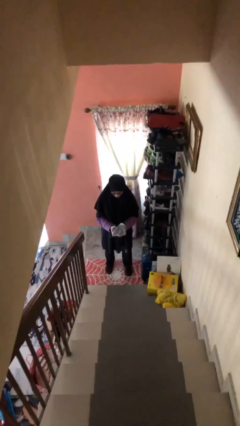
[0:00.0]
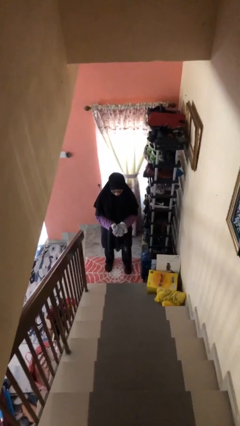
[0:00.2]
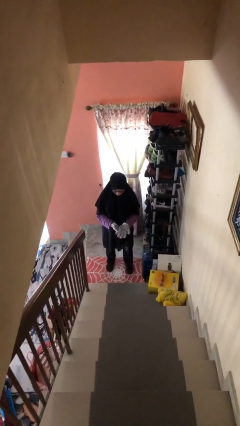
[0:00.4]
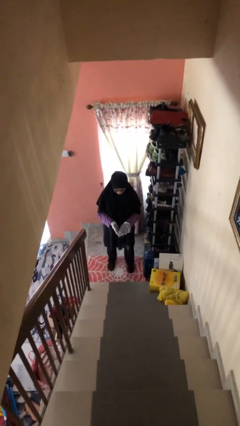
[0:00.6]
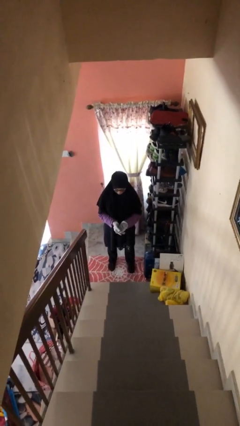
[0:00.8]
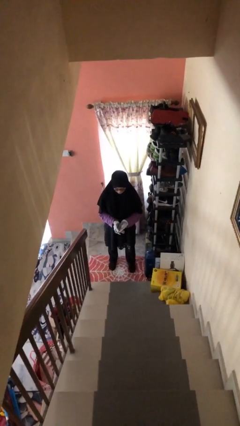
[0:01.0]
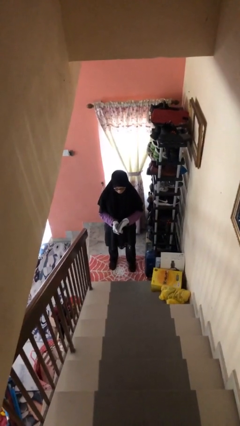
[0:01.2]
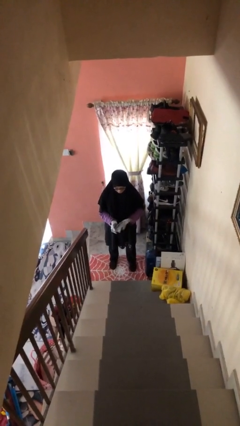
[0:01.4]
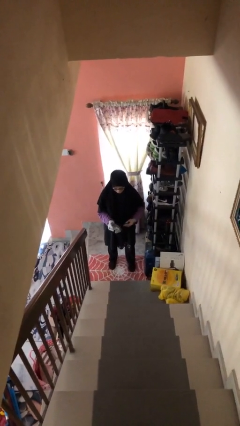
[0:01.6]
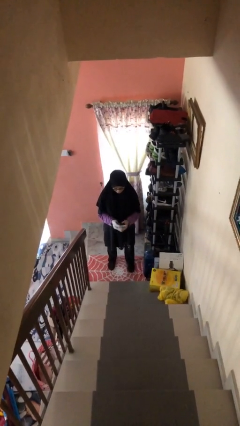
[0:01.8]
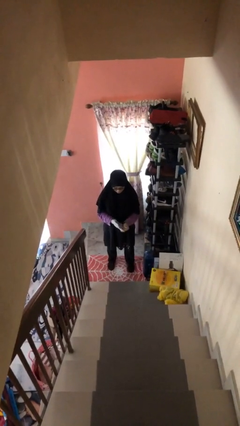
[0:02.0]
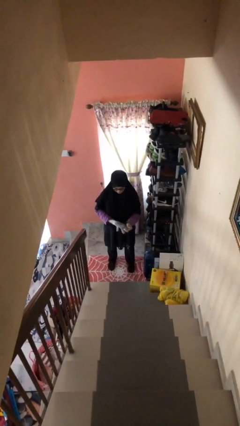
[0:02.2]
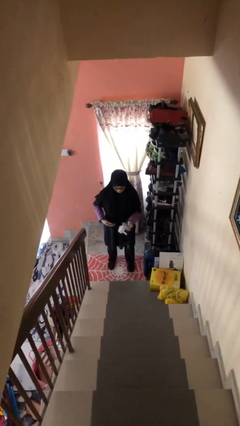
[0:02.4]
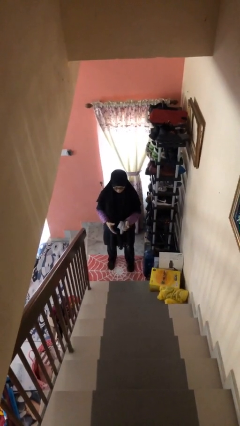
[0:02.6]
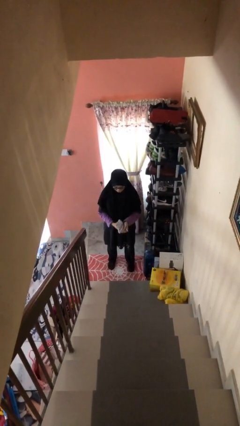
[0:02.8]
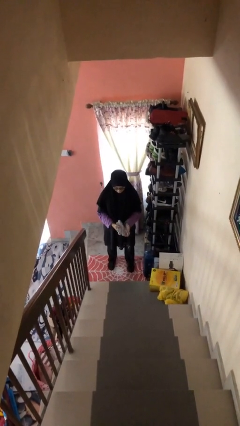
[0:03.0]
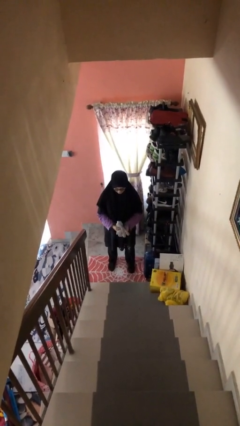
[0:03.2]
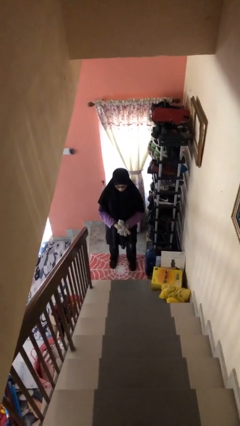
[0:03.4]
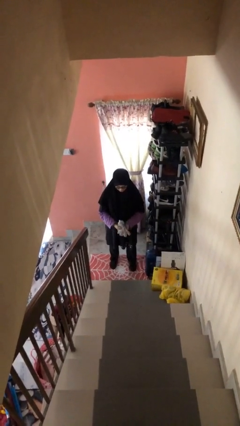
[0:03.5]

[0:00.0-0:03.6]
person takes off gloves

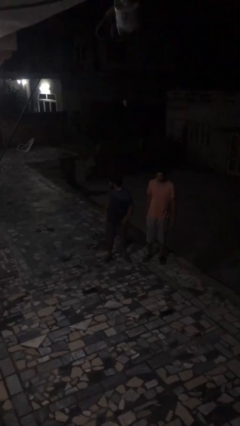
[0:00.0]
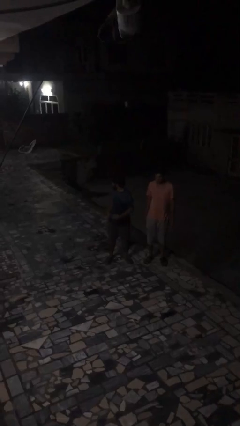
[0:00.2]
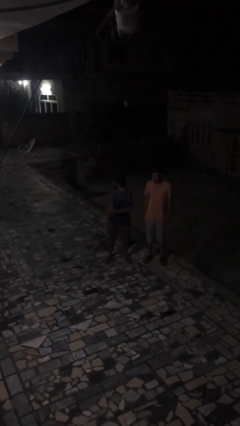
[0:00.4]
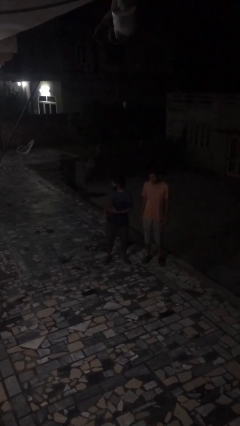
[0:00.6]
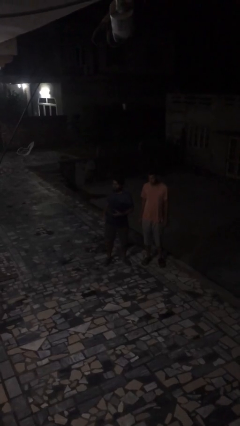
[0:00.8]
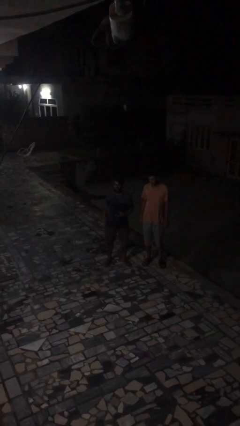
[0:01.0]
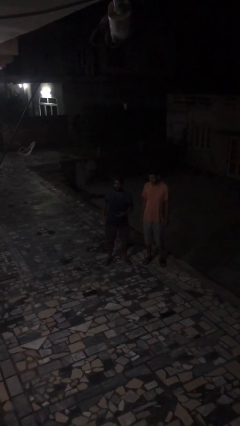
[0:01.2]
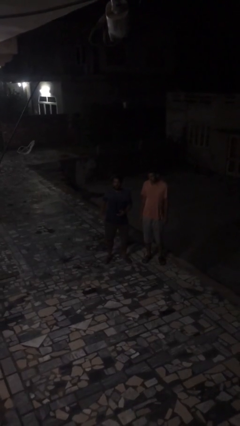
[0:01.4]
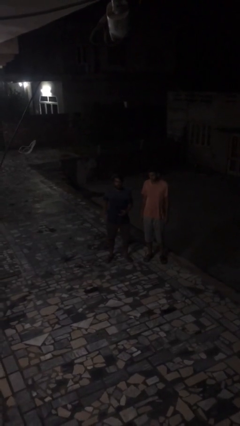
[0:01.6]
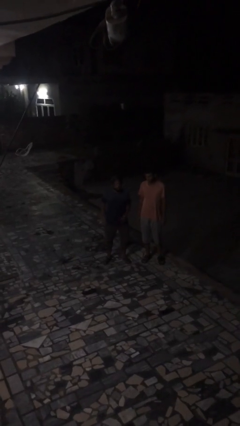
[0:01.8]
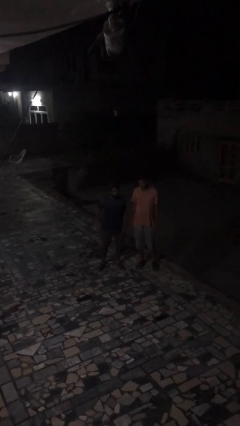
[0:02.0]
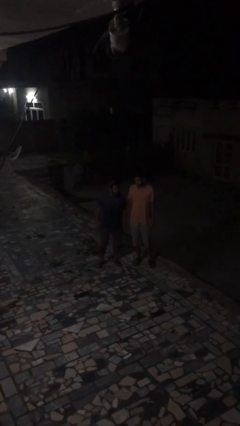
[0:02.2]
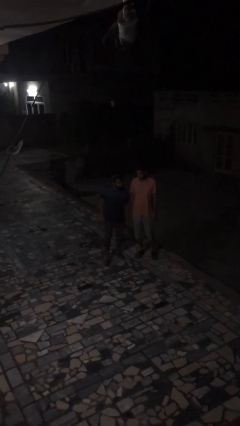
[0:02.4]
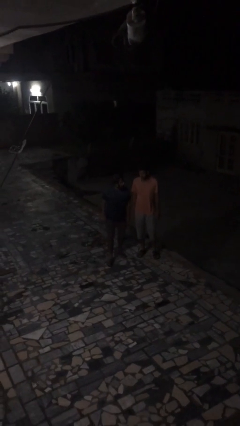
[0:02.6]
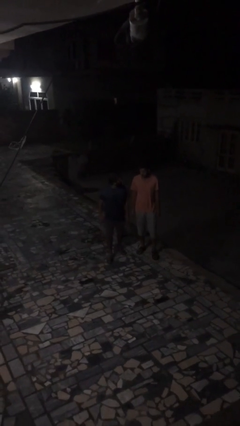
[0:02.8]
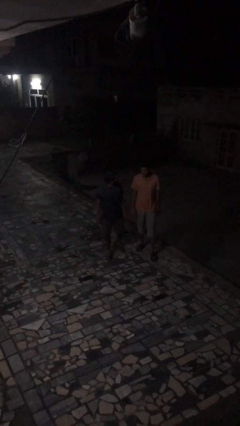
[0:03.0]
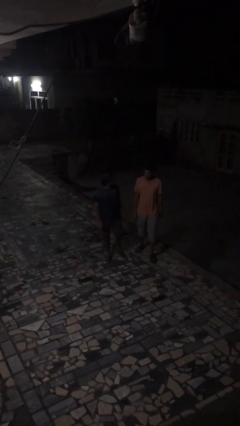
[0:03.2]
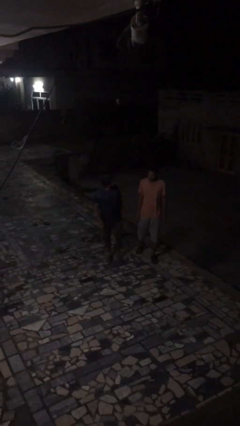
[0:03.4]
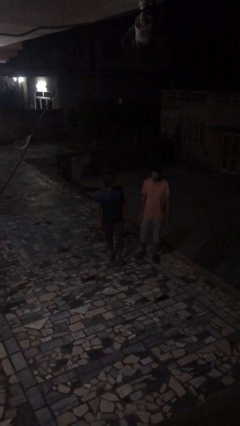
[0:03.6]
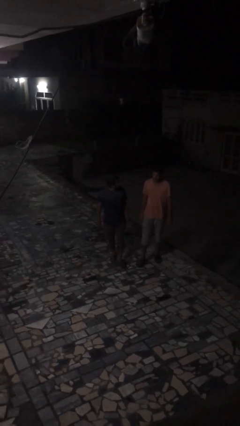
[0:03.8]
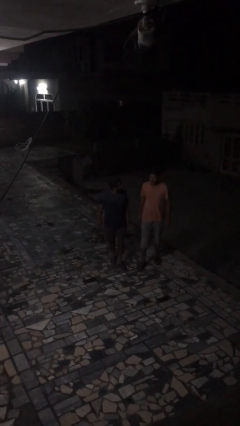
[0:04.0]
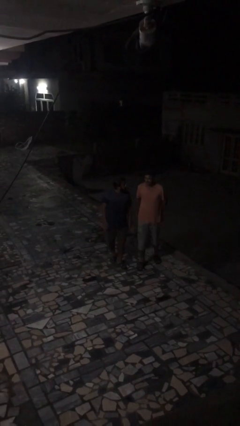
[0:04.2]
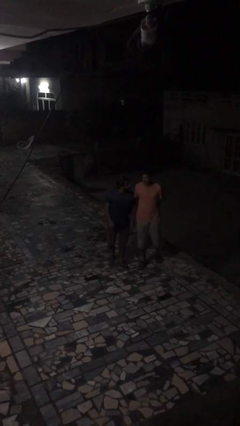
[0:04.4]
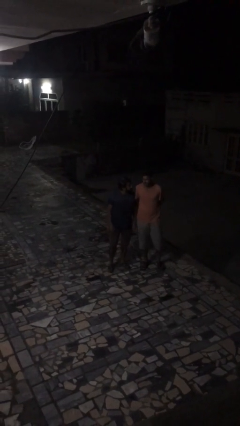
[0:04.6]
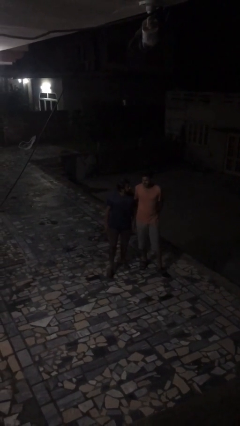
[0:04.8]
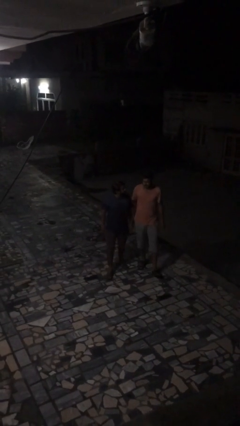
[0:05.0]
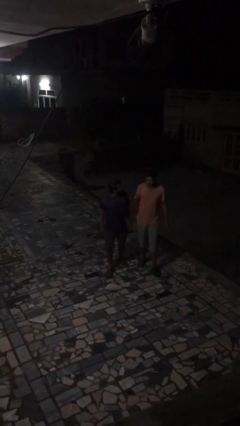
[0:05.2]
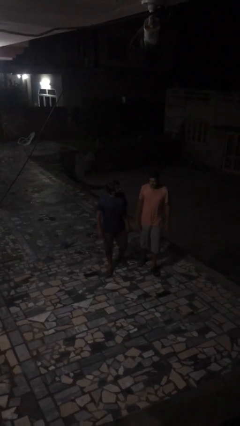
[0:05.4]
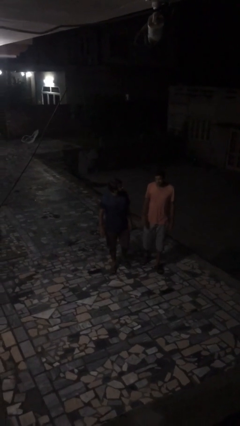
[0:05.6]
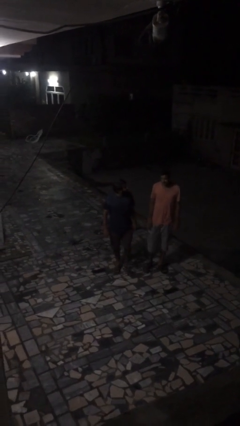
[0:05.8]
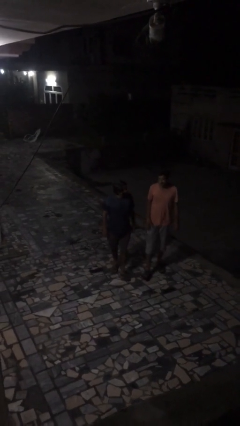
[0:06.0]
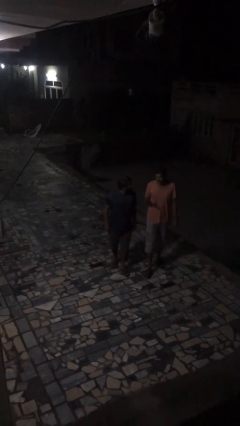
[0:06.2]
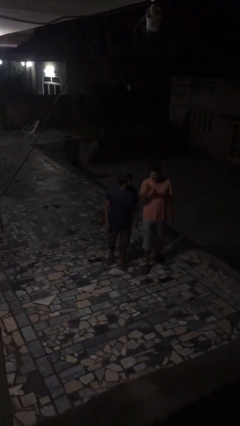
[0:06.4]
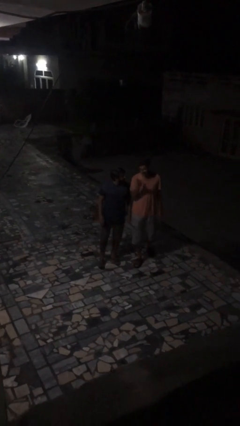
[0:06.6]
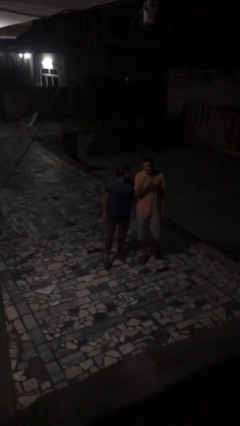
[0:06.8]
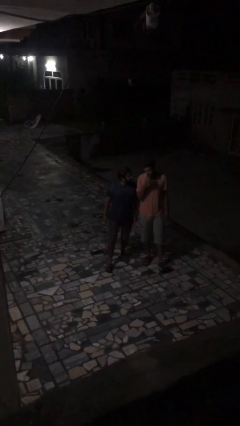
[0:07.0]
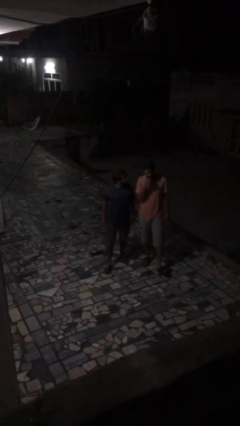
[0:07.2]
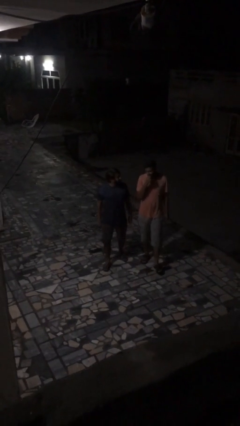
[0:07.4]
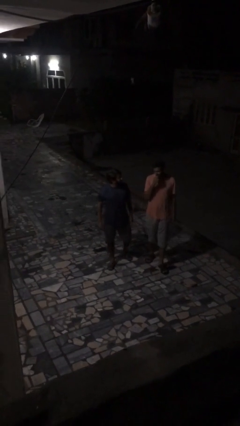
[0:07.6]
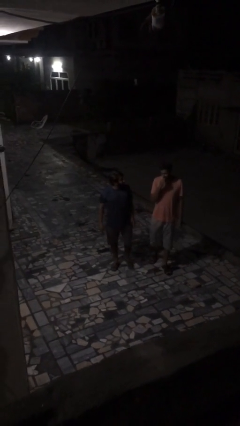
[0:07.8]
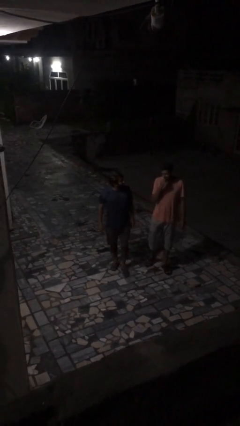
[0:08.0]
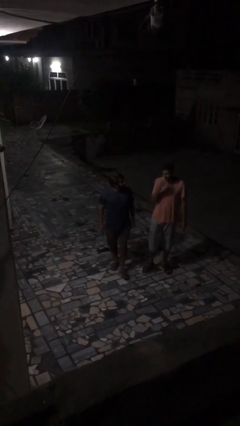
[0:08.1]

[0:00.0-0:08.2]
person talks to person

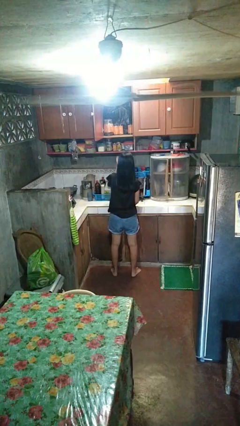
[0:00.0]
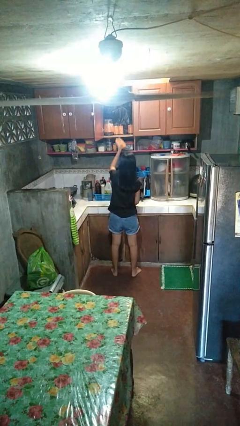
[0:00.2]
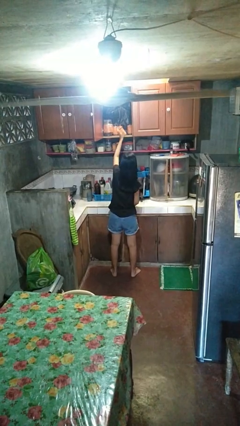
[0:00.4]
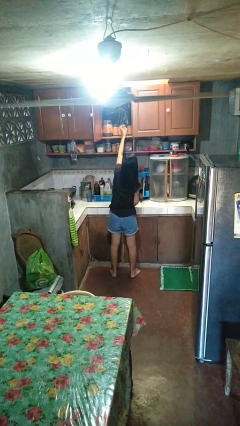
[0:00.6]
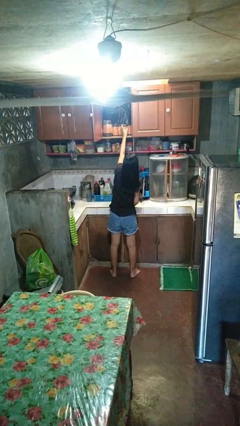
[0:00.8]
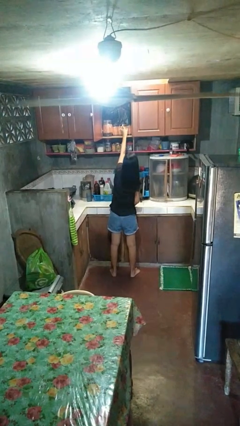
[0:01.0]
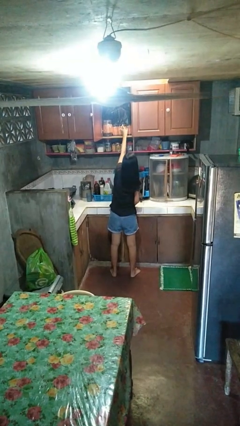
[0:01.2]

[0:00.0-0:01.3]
person puts down object into cabinet

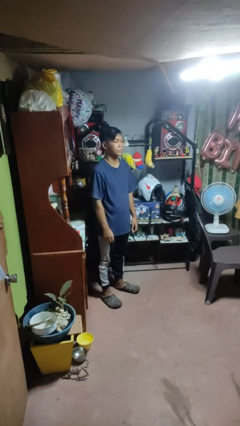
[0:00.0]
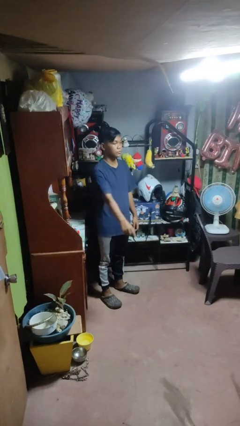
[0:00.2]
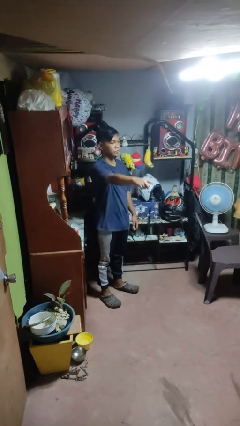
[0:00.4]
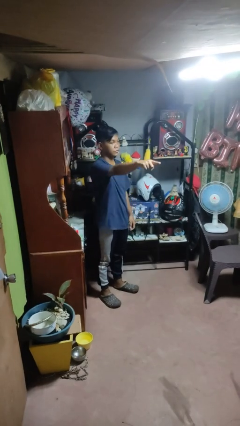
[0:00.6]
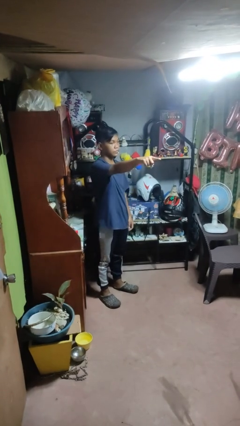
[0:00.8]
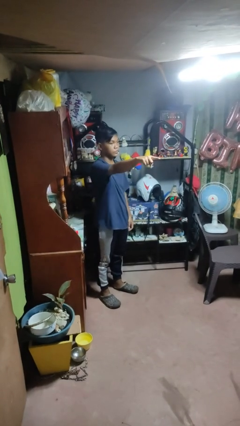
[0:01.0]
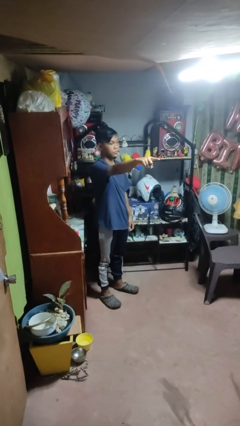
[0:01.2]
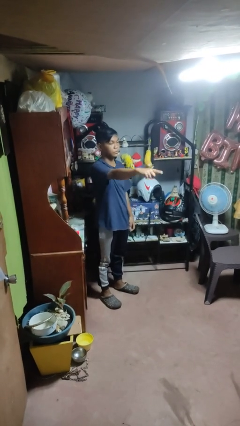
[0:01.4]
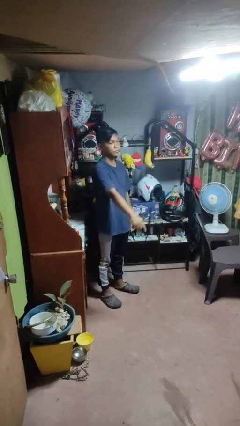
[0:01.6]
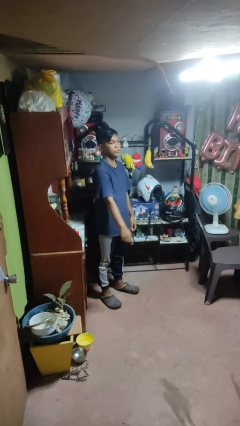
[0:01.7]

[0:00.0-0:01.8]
person points at person

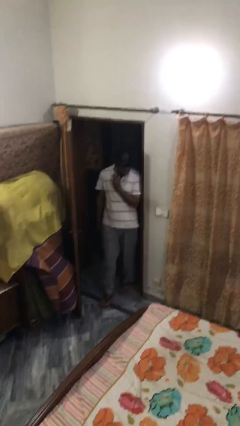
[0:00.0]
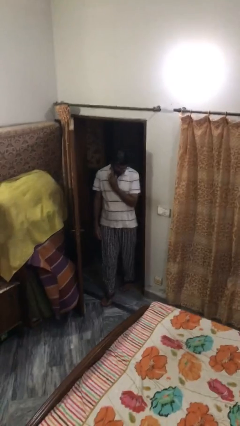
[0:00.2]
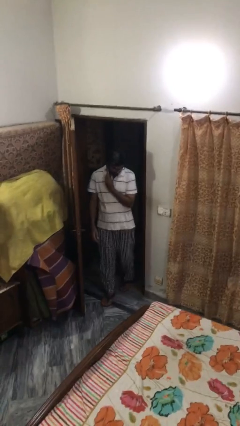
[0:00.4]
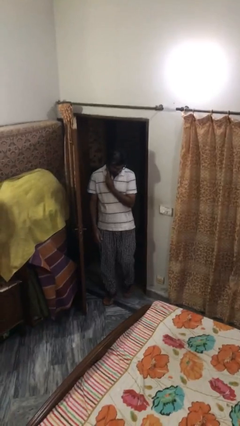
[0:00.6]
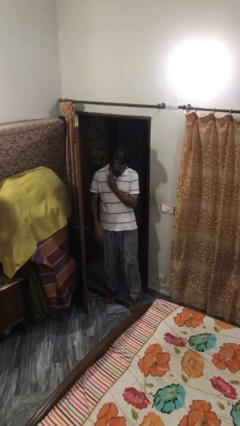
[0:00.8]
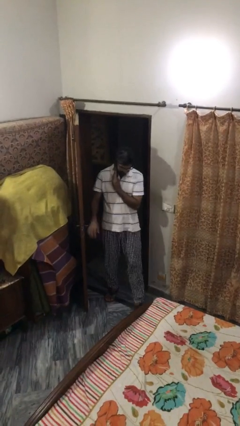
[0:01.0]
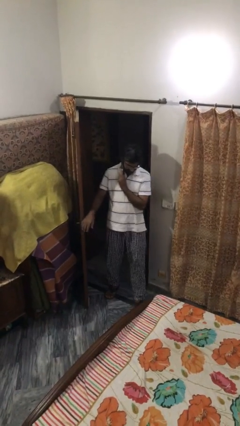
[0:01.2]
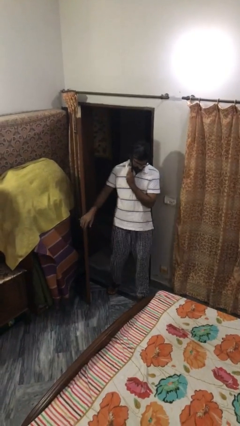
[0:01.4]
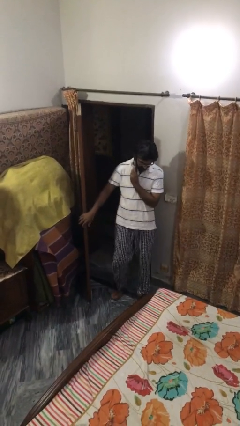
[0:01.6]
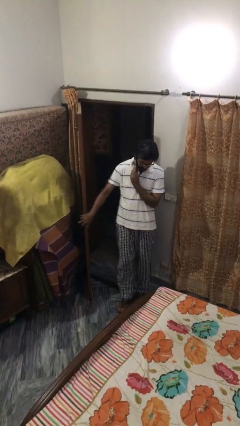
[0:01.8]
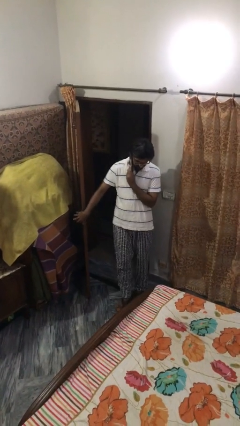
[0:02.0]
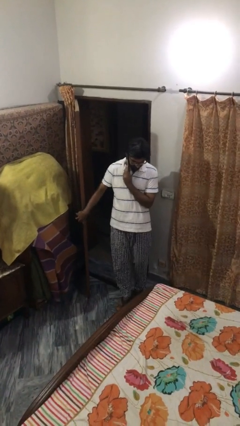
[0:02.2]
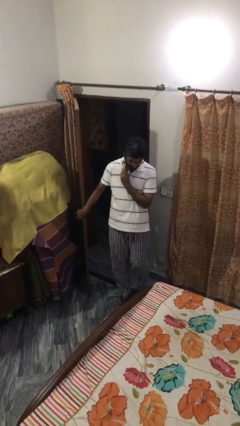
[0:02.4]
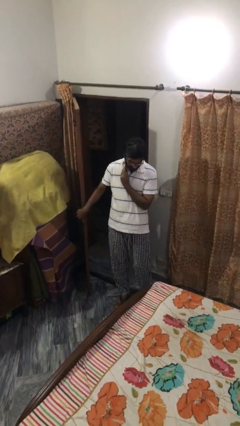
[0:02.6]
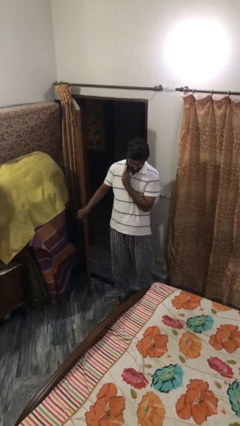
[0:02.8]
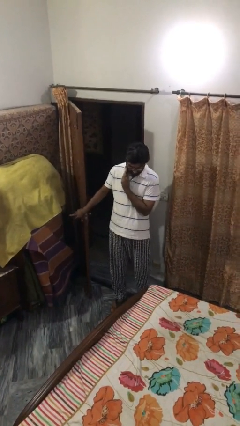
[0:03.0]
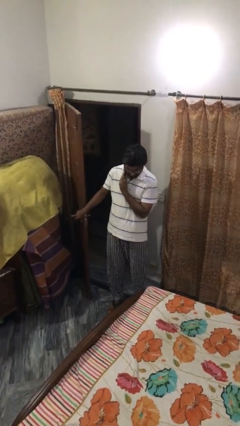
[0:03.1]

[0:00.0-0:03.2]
person enters scene through structure
